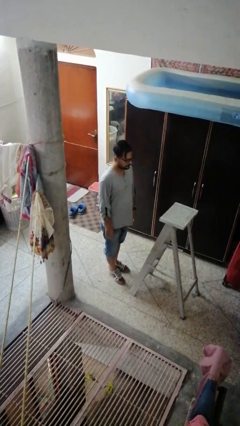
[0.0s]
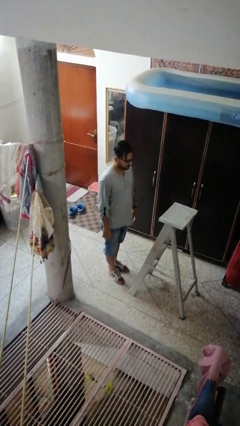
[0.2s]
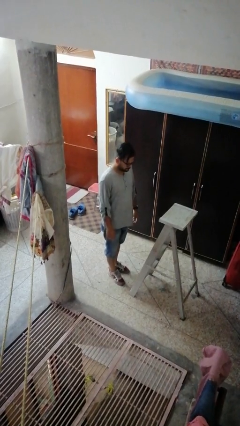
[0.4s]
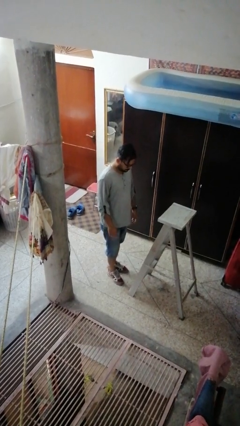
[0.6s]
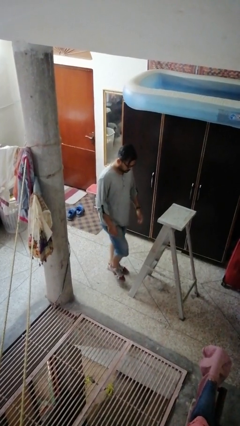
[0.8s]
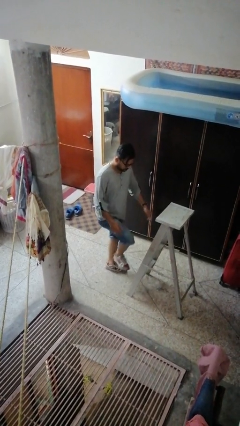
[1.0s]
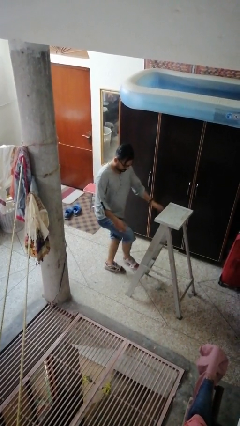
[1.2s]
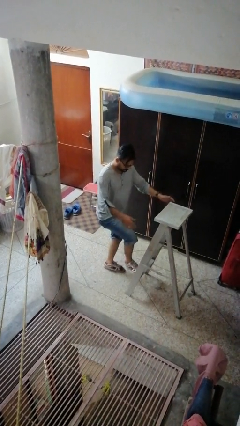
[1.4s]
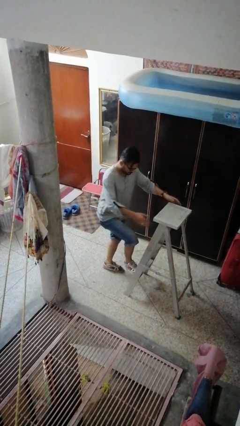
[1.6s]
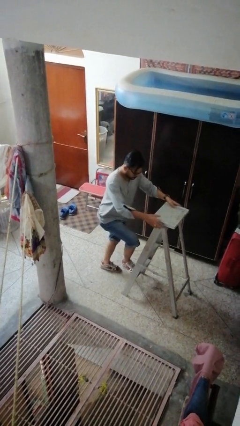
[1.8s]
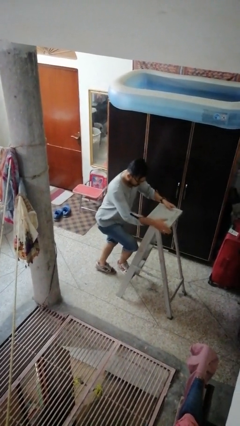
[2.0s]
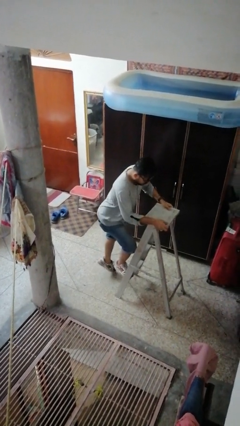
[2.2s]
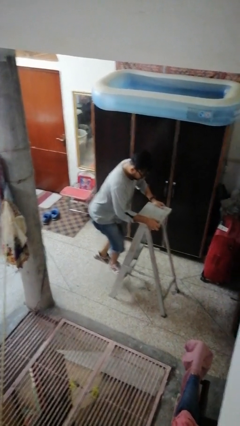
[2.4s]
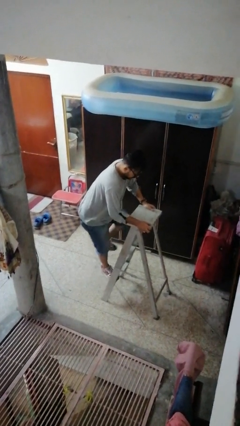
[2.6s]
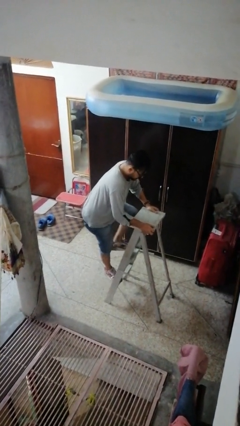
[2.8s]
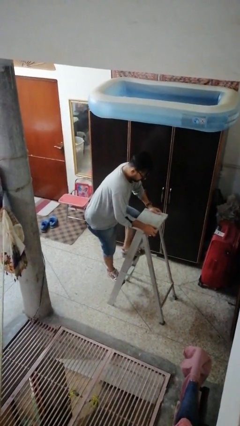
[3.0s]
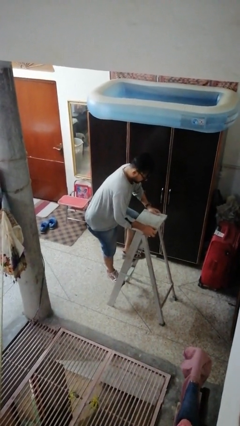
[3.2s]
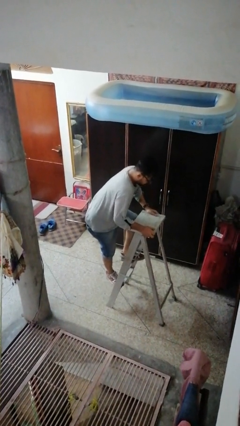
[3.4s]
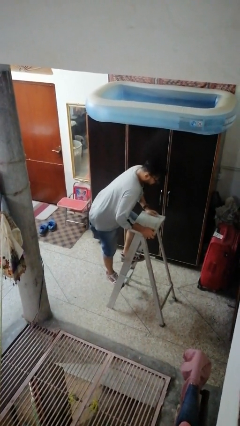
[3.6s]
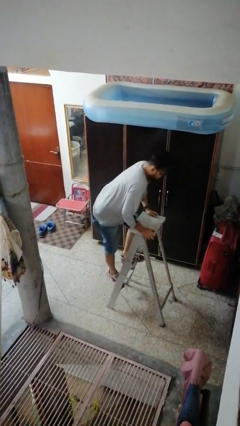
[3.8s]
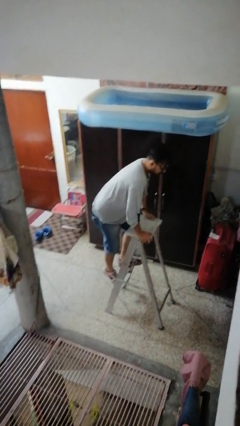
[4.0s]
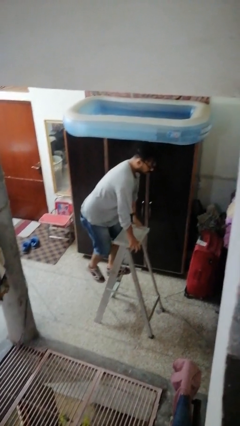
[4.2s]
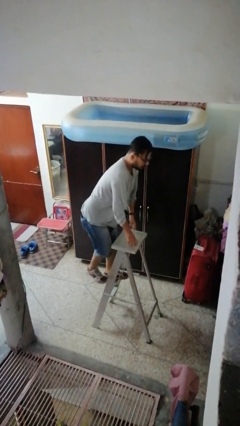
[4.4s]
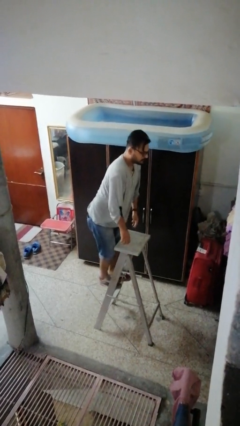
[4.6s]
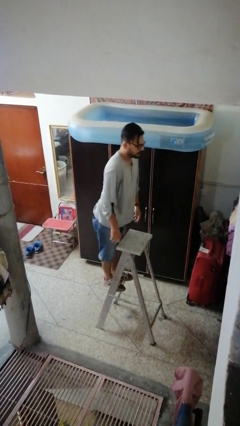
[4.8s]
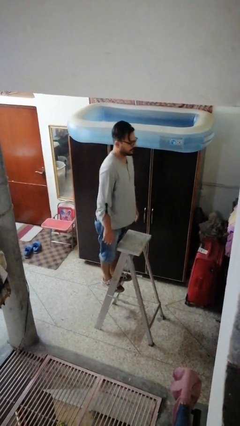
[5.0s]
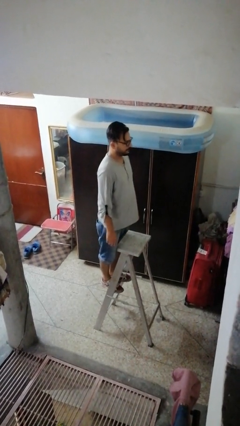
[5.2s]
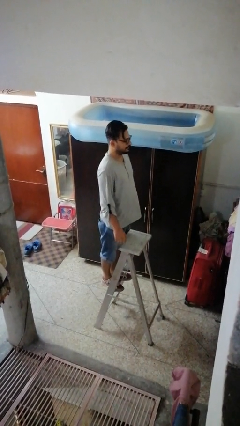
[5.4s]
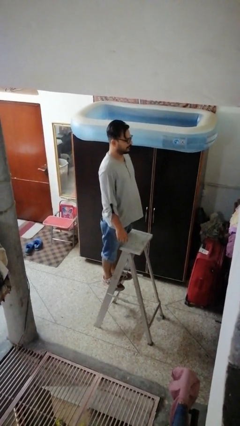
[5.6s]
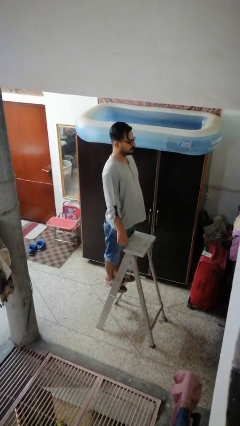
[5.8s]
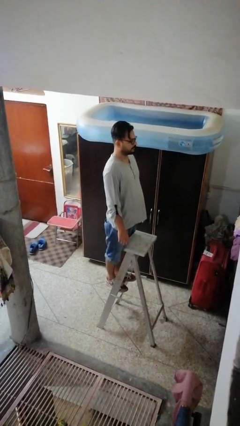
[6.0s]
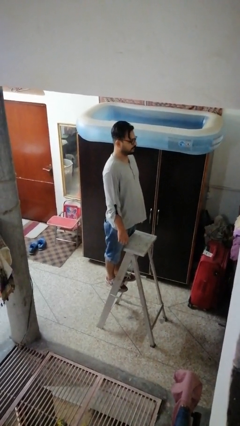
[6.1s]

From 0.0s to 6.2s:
person climbs up ladder

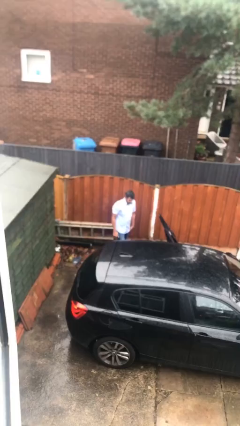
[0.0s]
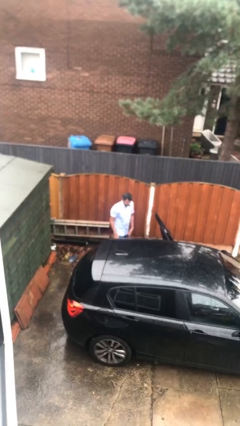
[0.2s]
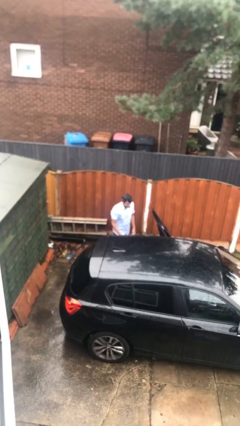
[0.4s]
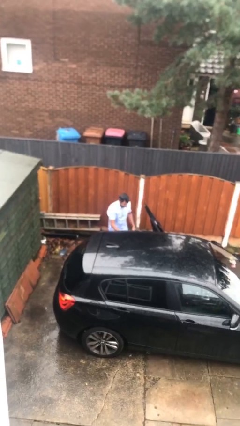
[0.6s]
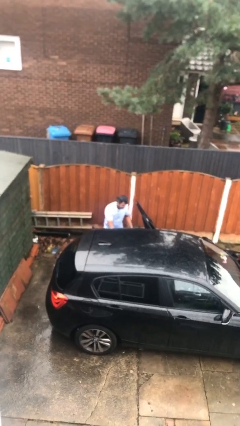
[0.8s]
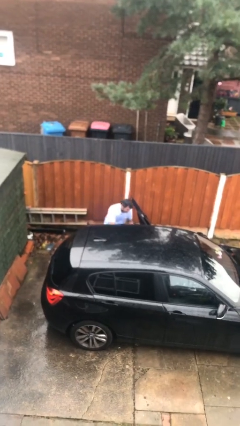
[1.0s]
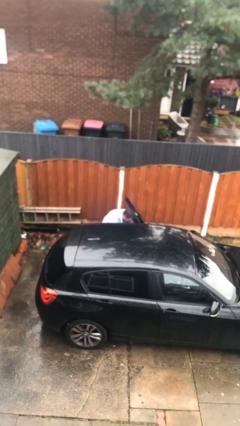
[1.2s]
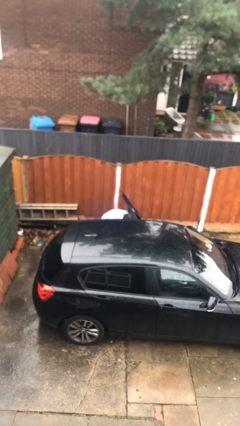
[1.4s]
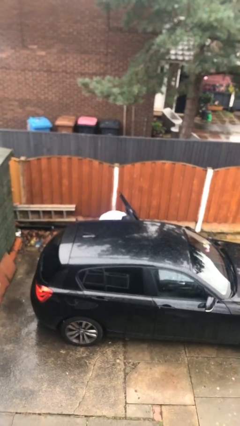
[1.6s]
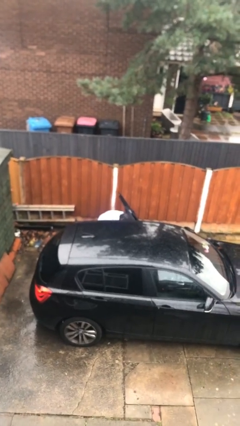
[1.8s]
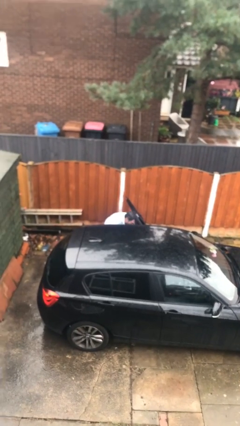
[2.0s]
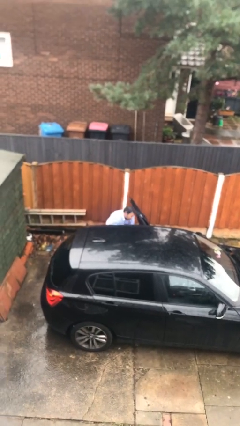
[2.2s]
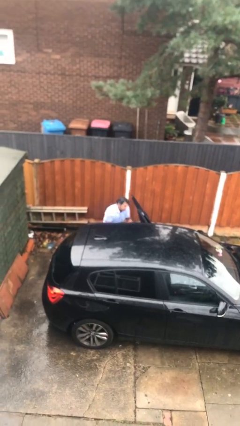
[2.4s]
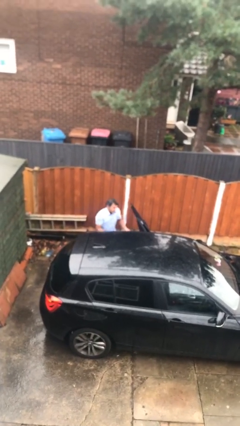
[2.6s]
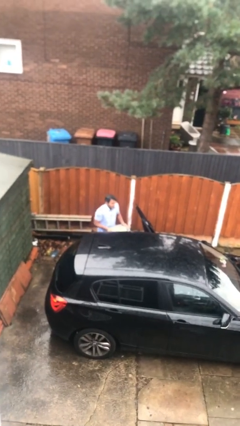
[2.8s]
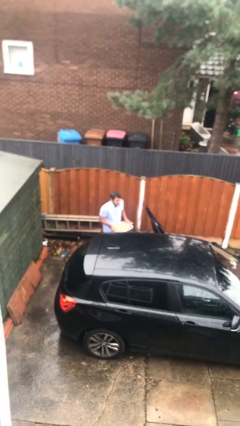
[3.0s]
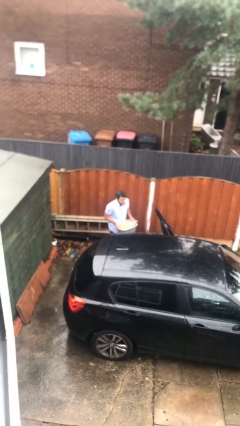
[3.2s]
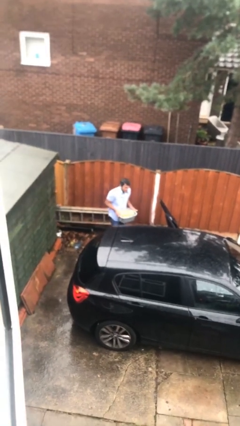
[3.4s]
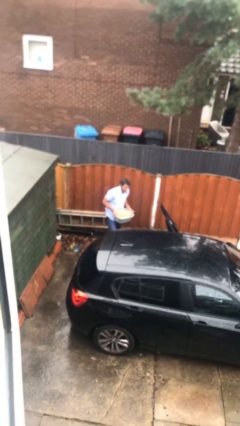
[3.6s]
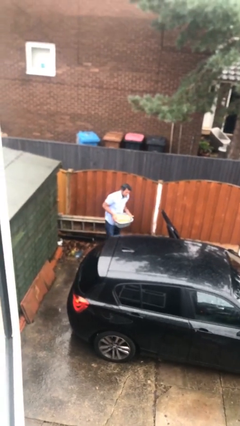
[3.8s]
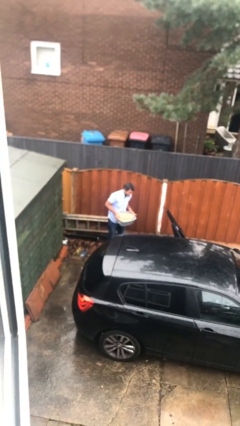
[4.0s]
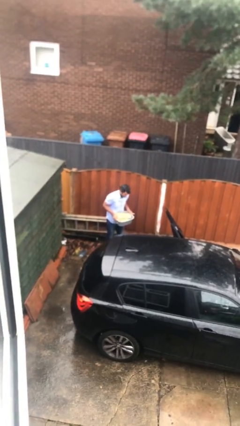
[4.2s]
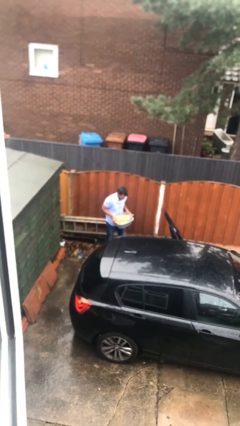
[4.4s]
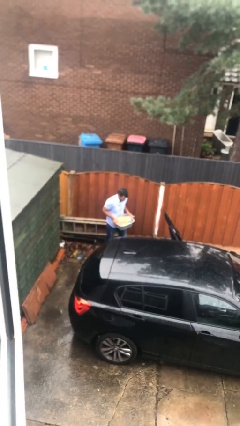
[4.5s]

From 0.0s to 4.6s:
person unloads car

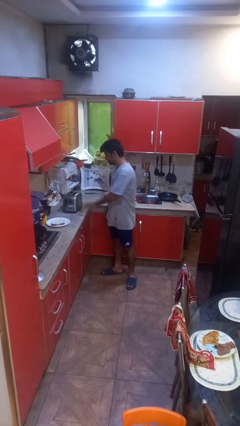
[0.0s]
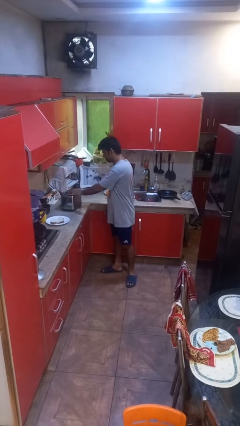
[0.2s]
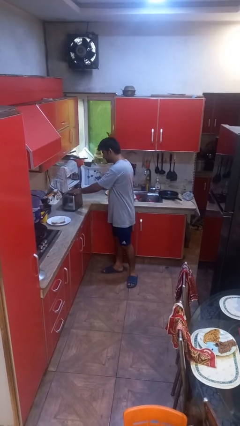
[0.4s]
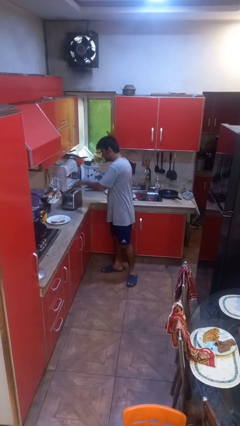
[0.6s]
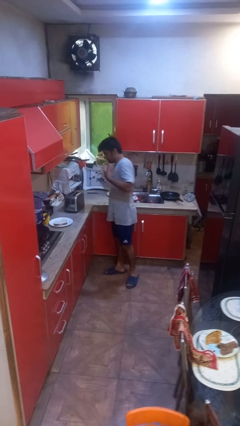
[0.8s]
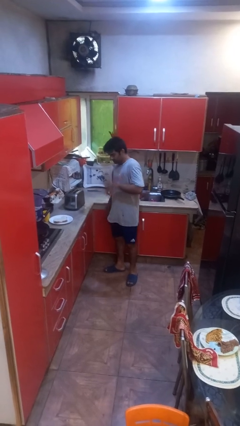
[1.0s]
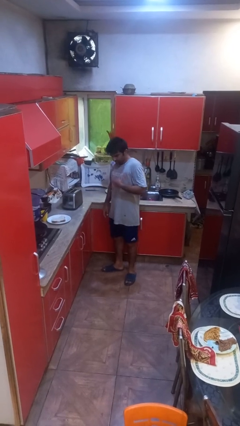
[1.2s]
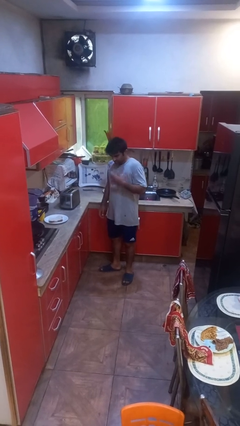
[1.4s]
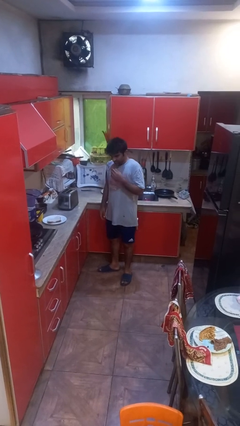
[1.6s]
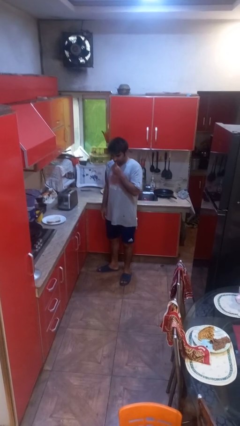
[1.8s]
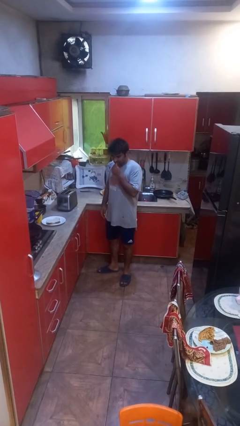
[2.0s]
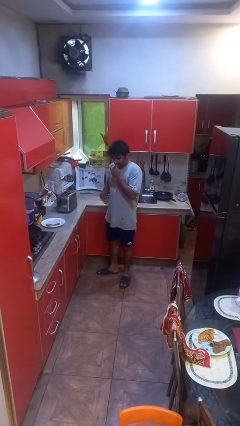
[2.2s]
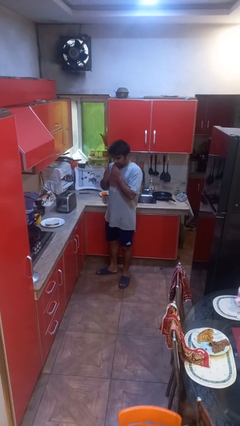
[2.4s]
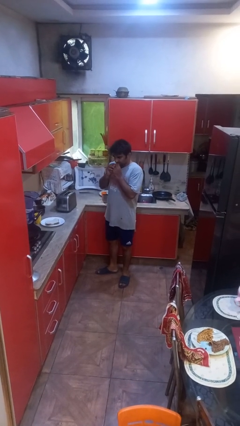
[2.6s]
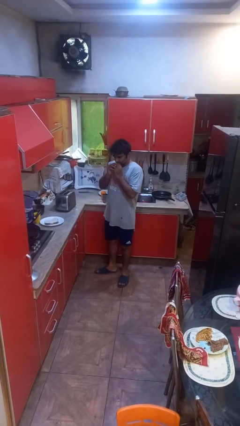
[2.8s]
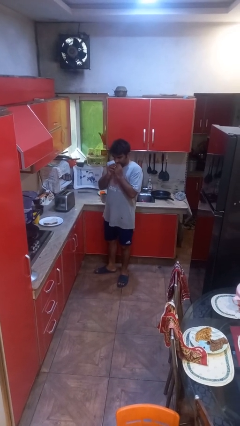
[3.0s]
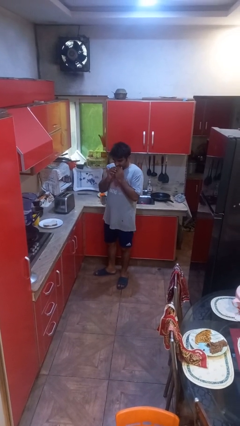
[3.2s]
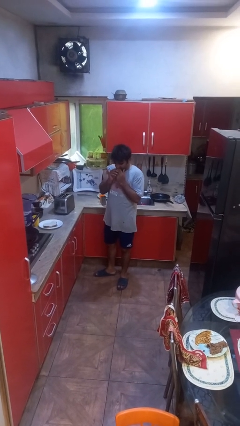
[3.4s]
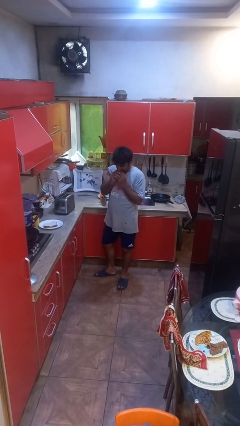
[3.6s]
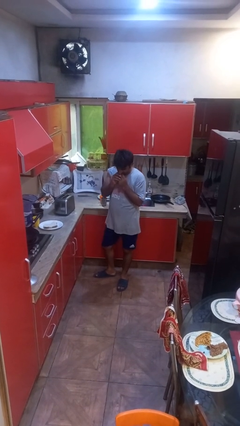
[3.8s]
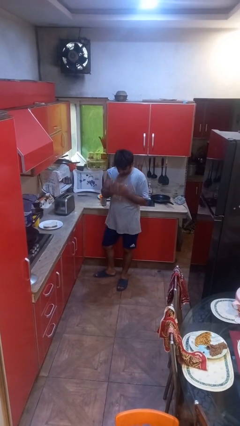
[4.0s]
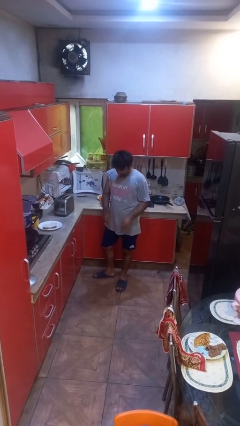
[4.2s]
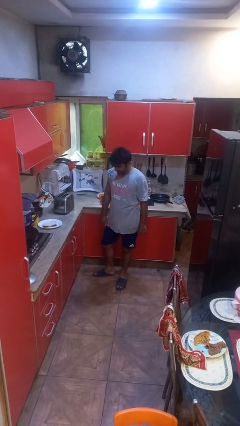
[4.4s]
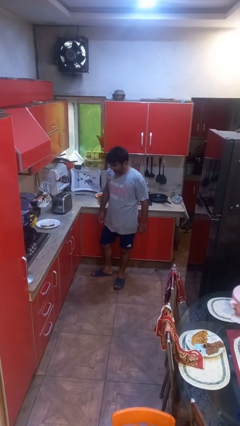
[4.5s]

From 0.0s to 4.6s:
person burns hand

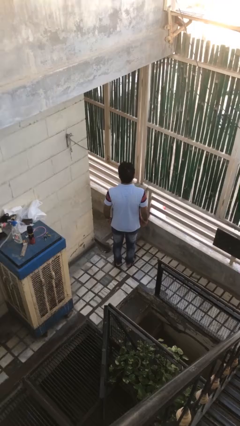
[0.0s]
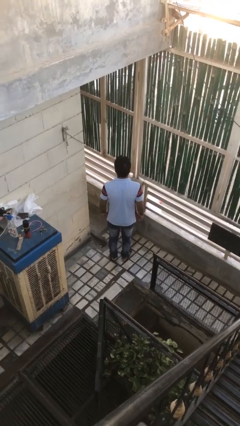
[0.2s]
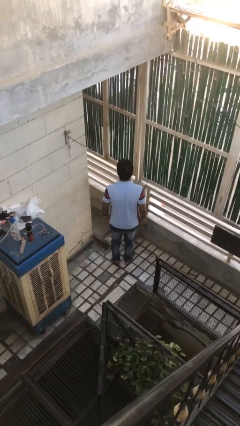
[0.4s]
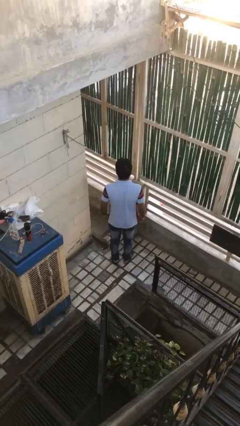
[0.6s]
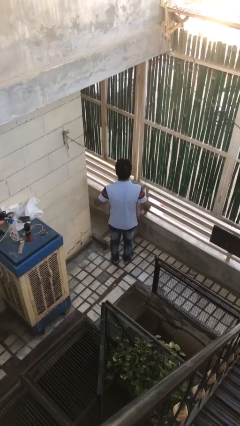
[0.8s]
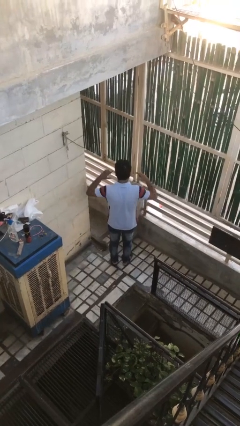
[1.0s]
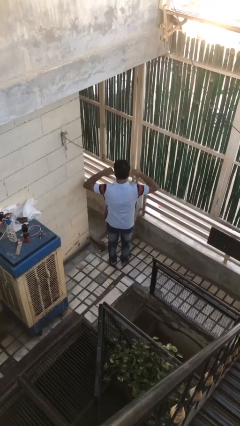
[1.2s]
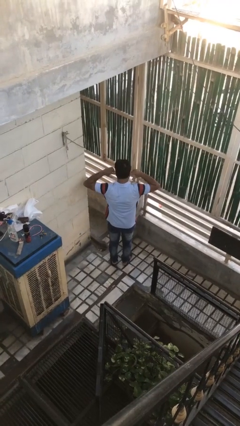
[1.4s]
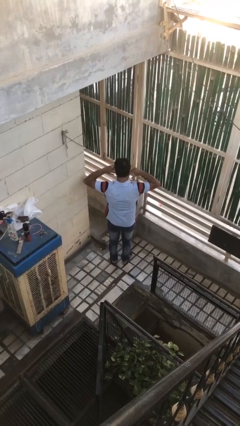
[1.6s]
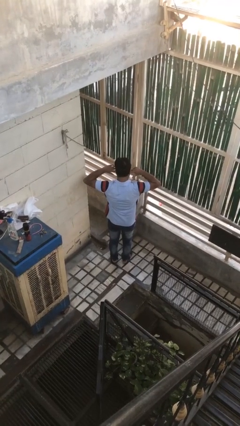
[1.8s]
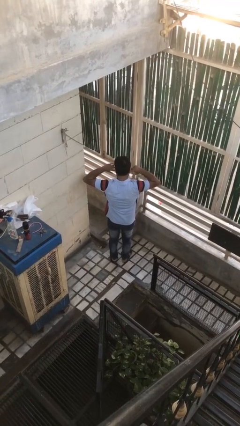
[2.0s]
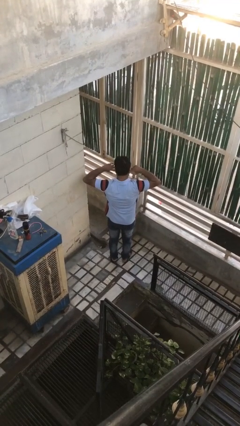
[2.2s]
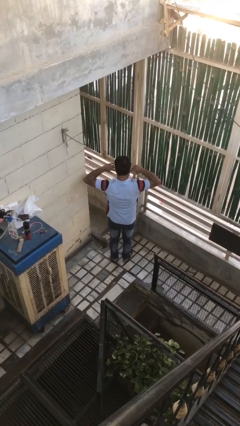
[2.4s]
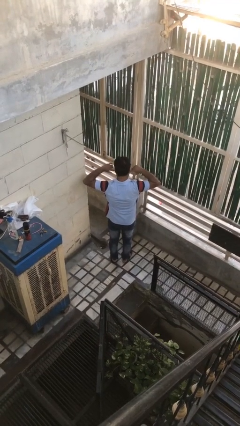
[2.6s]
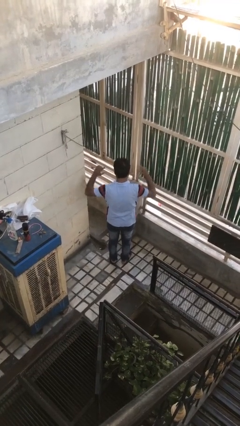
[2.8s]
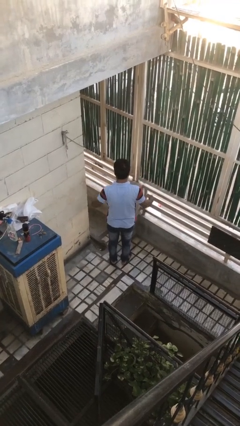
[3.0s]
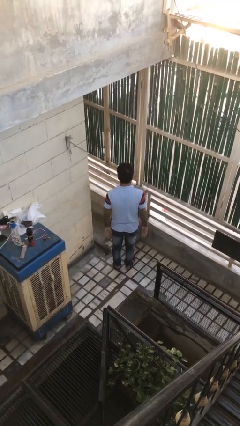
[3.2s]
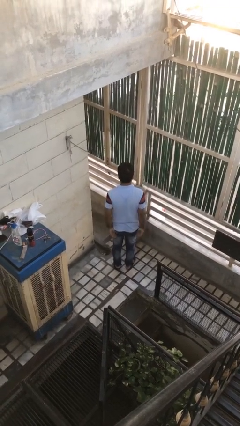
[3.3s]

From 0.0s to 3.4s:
person puts fingers in ear
